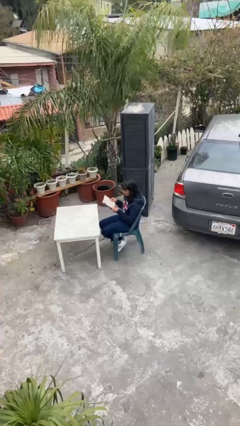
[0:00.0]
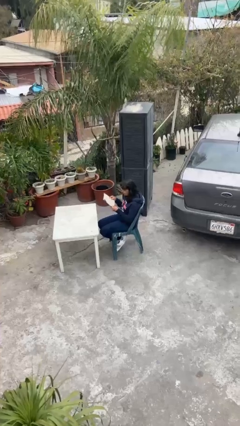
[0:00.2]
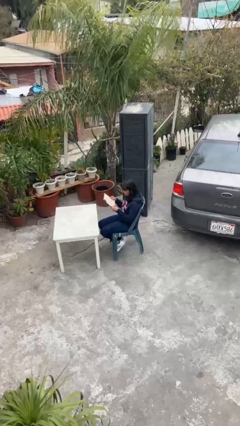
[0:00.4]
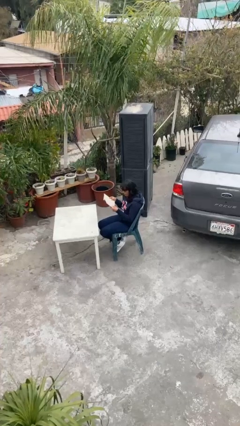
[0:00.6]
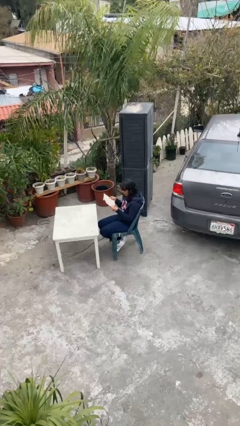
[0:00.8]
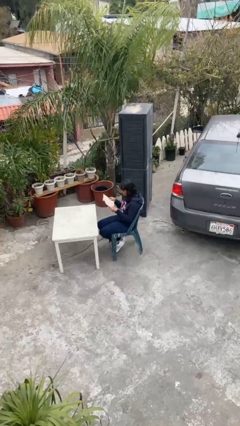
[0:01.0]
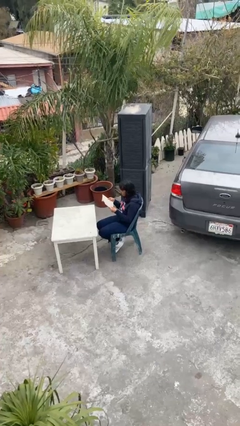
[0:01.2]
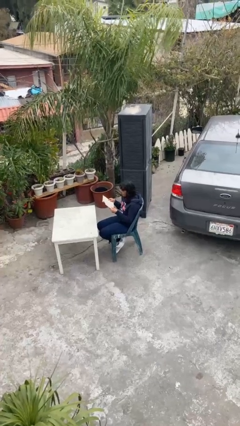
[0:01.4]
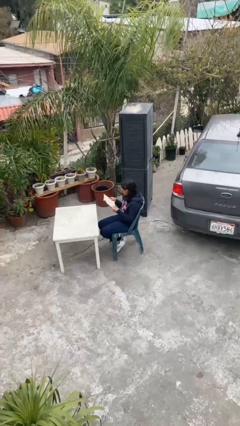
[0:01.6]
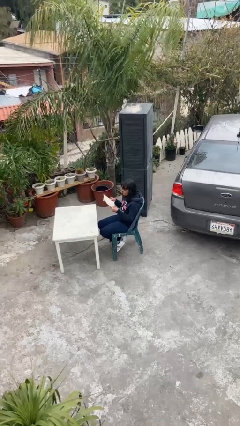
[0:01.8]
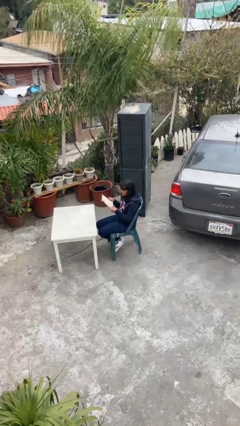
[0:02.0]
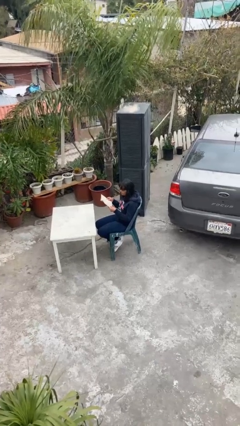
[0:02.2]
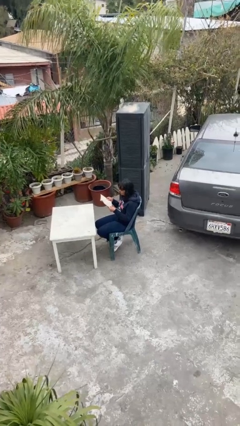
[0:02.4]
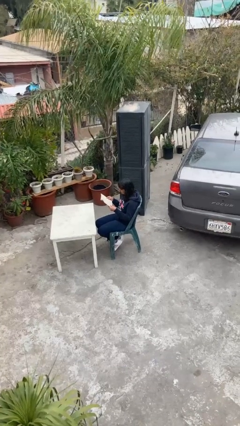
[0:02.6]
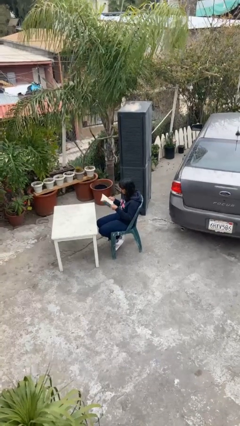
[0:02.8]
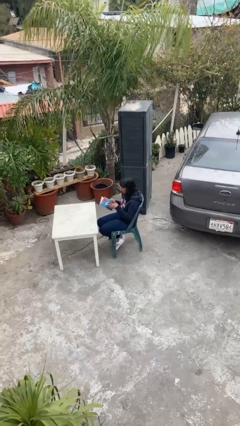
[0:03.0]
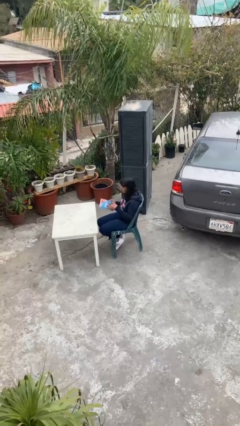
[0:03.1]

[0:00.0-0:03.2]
person reads document

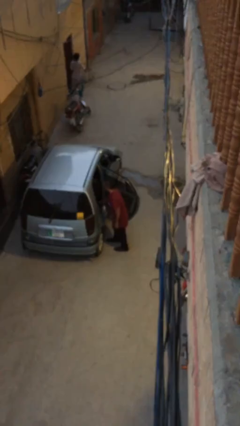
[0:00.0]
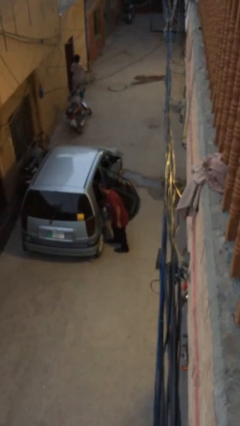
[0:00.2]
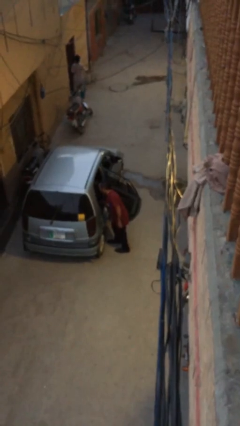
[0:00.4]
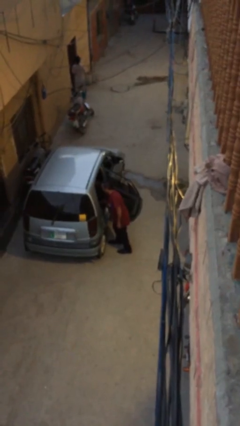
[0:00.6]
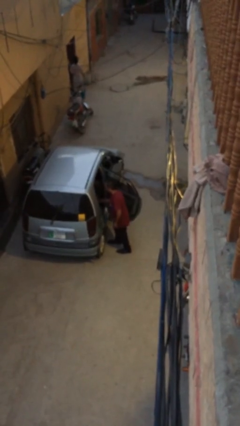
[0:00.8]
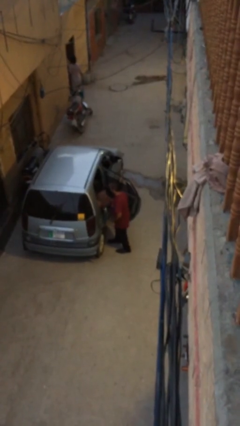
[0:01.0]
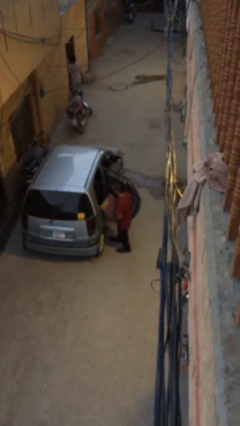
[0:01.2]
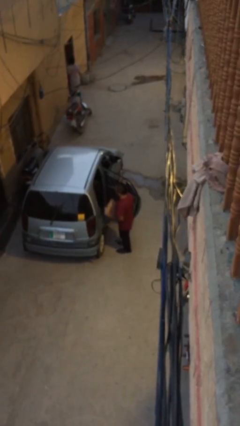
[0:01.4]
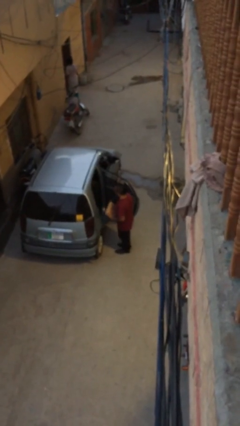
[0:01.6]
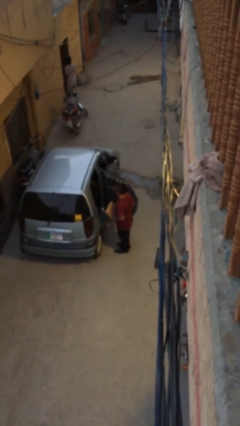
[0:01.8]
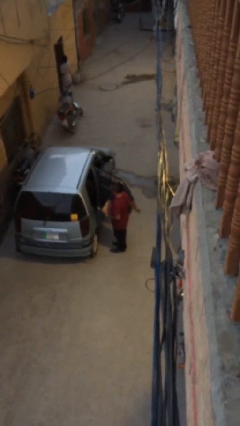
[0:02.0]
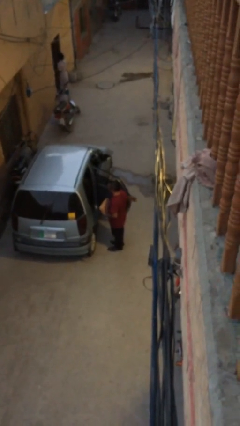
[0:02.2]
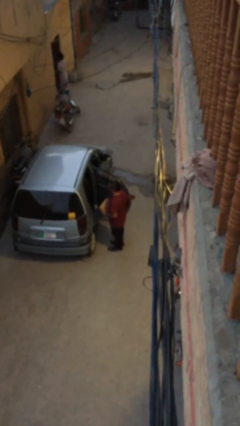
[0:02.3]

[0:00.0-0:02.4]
person unloads car

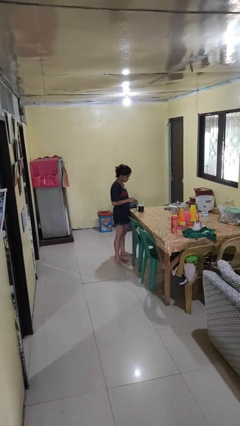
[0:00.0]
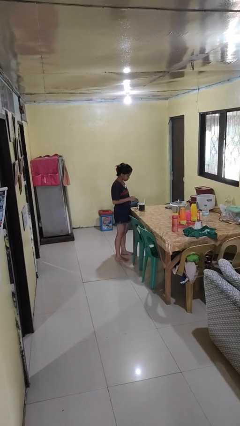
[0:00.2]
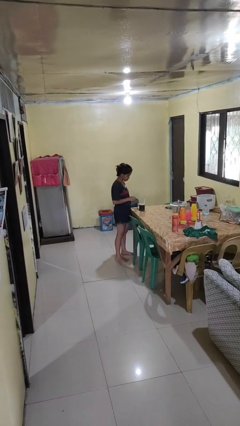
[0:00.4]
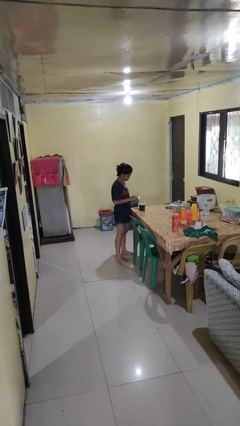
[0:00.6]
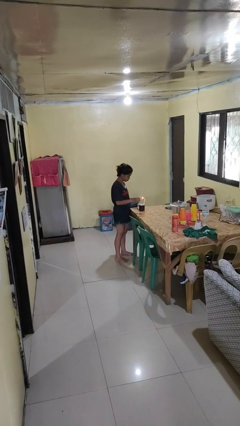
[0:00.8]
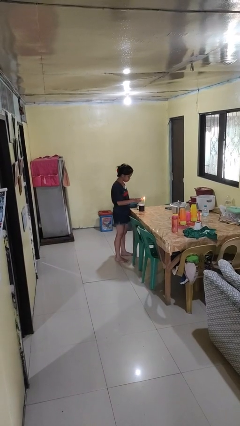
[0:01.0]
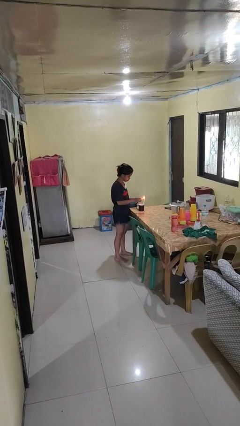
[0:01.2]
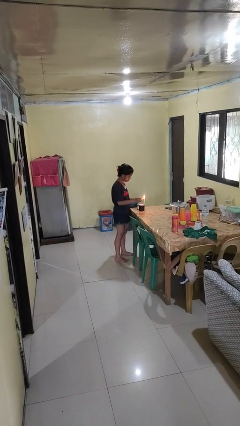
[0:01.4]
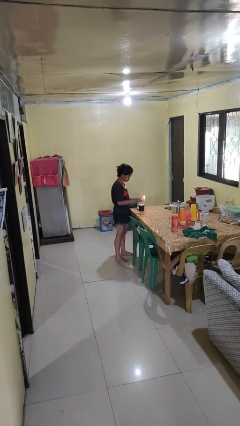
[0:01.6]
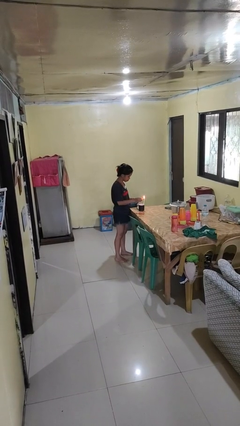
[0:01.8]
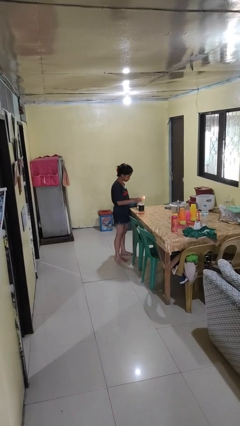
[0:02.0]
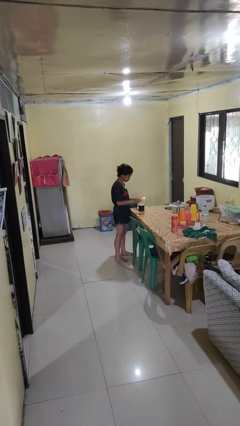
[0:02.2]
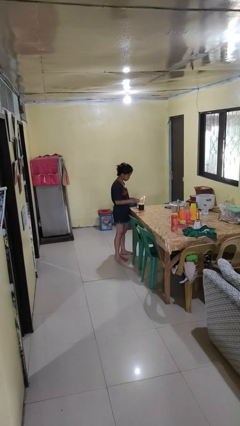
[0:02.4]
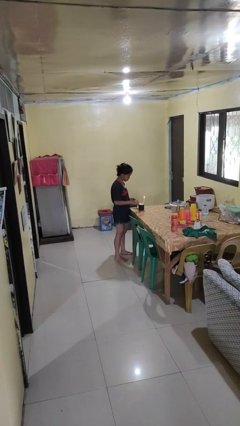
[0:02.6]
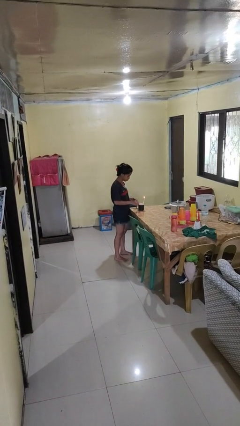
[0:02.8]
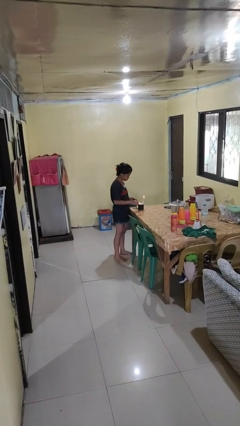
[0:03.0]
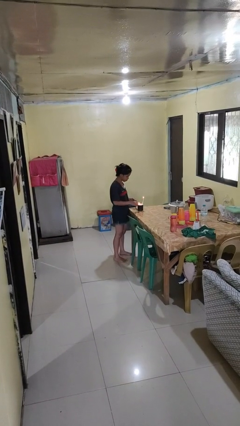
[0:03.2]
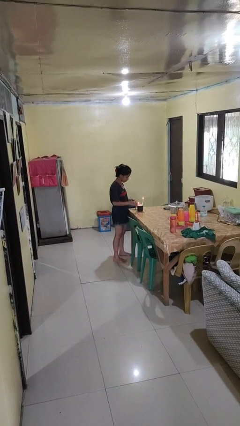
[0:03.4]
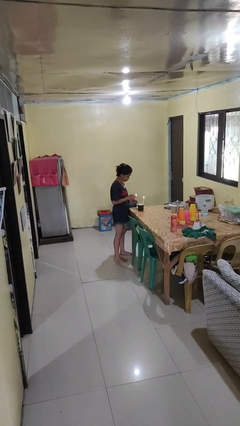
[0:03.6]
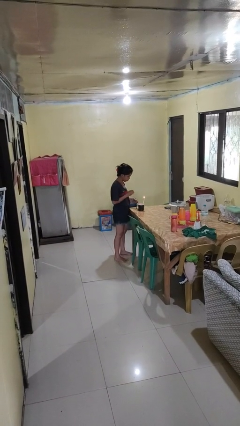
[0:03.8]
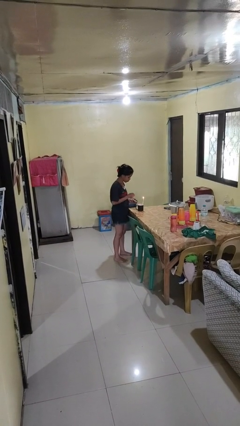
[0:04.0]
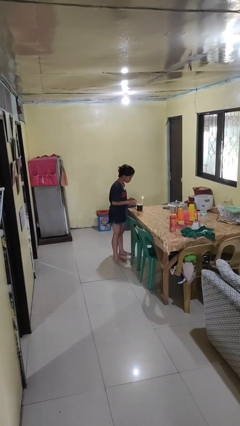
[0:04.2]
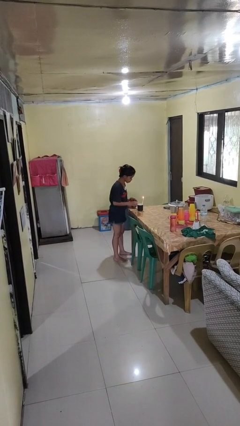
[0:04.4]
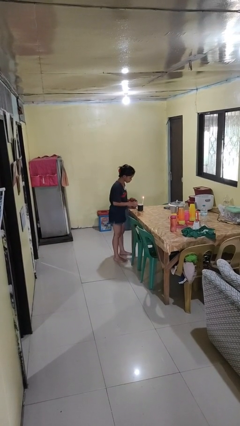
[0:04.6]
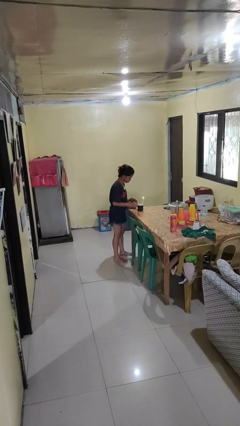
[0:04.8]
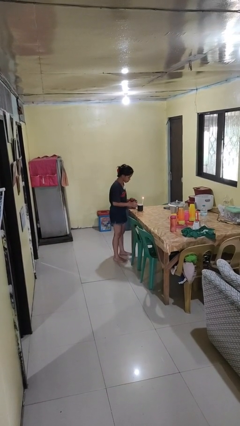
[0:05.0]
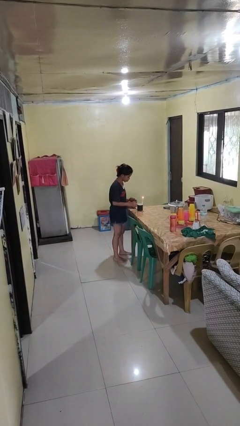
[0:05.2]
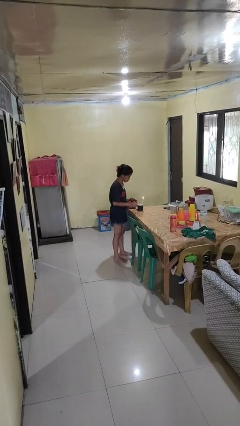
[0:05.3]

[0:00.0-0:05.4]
person lights candle

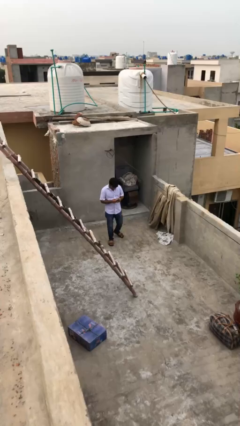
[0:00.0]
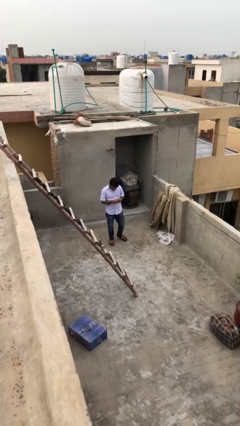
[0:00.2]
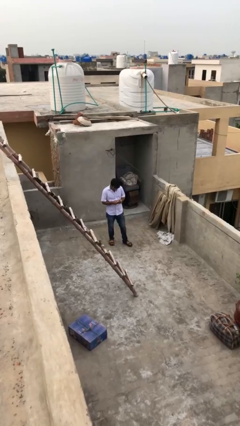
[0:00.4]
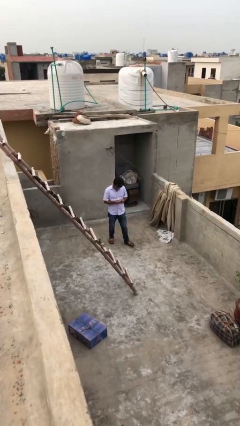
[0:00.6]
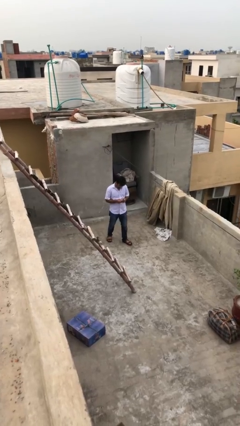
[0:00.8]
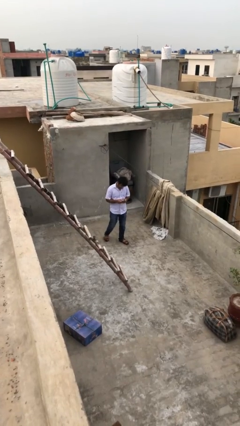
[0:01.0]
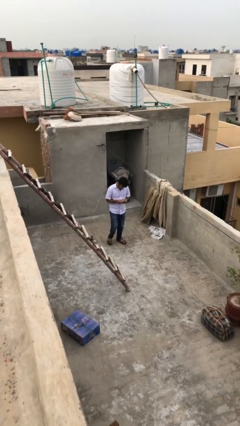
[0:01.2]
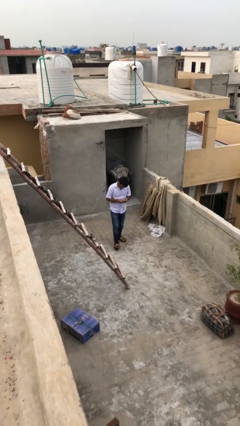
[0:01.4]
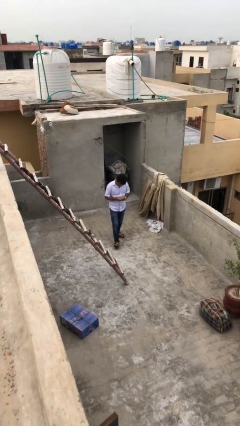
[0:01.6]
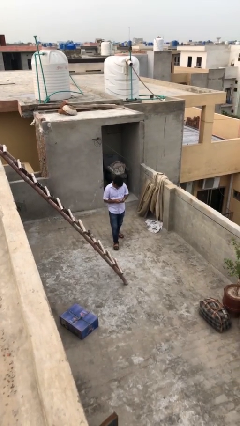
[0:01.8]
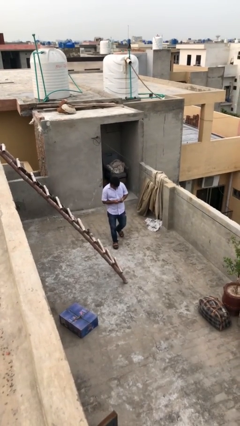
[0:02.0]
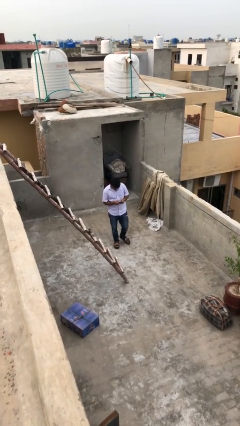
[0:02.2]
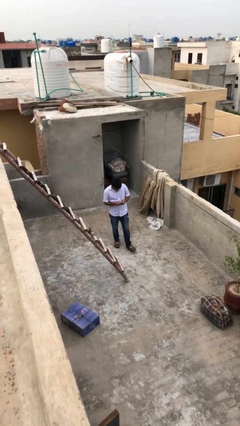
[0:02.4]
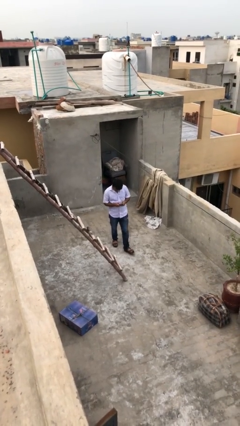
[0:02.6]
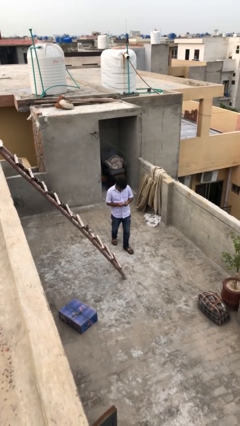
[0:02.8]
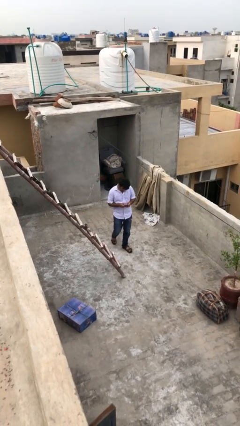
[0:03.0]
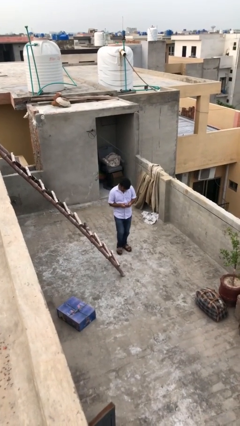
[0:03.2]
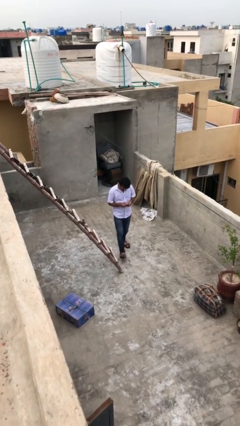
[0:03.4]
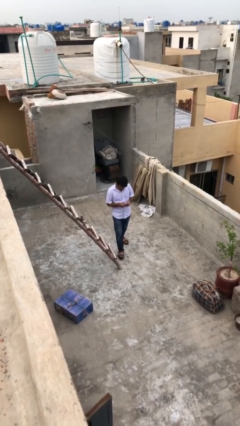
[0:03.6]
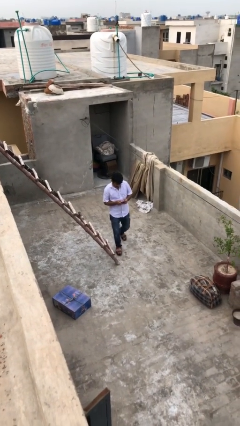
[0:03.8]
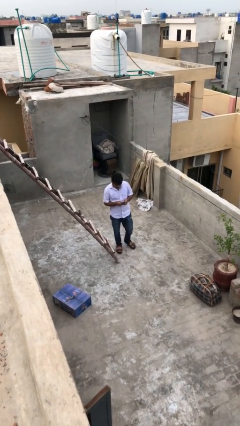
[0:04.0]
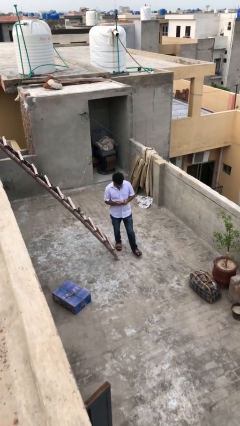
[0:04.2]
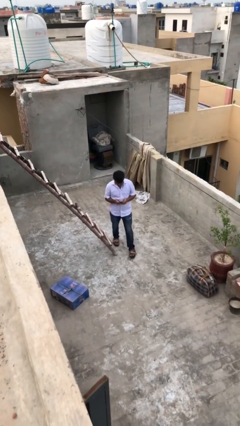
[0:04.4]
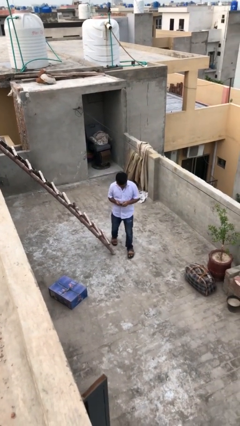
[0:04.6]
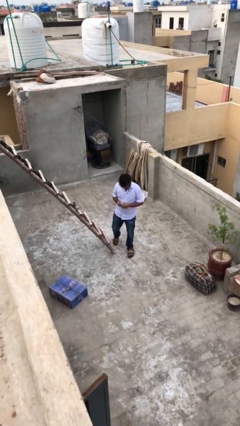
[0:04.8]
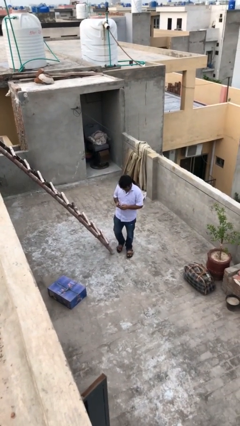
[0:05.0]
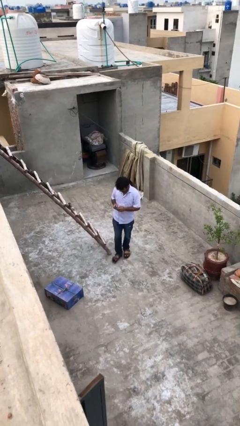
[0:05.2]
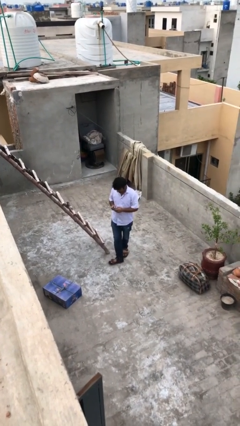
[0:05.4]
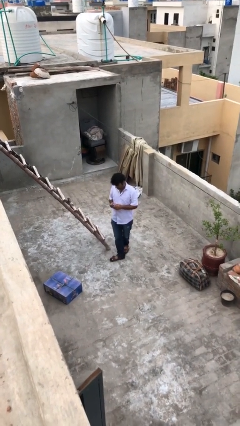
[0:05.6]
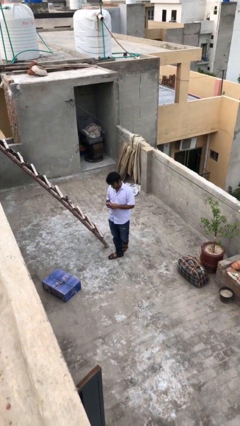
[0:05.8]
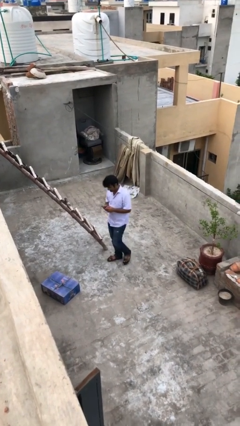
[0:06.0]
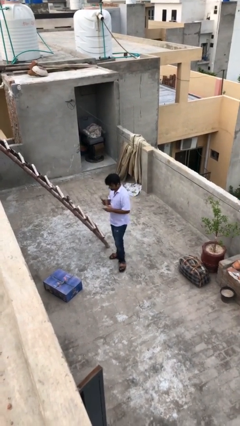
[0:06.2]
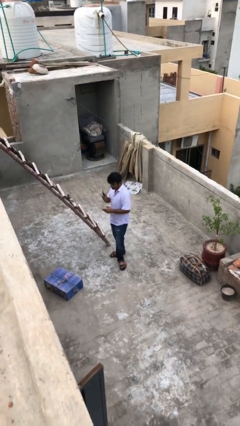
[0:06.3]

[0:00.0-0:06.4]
person texts on phone
